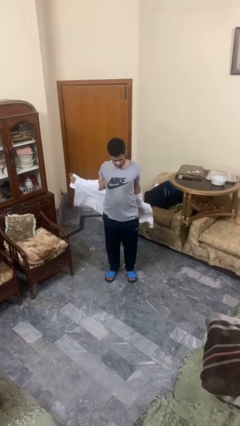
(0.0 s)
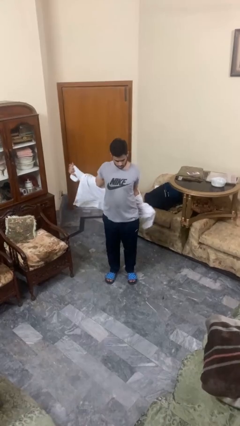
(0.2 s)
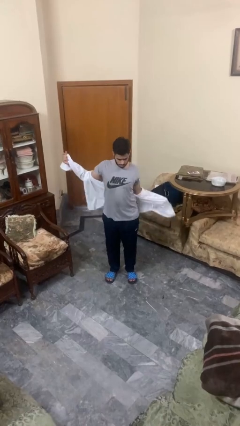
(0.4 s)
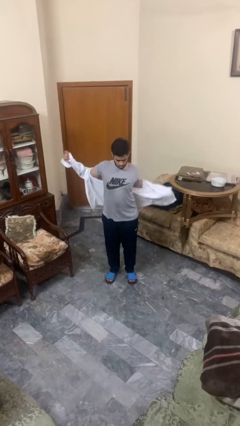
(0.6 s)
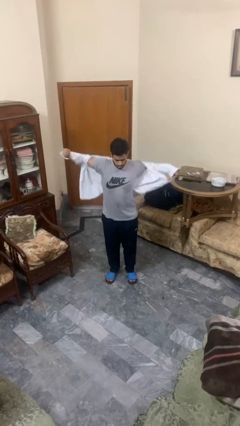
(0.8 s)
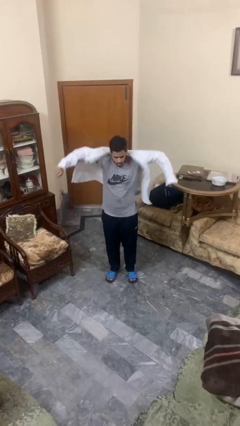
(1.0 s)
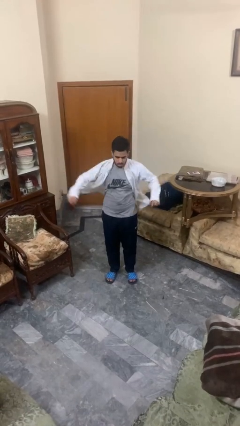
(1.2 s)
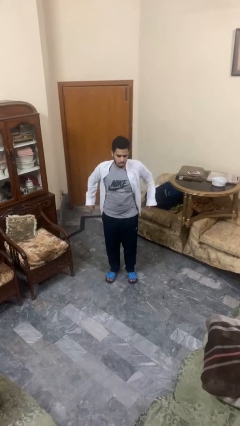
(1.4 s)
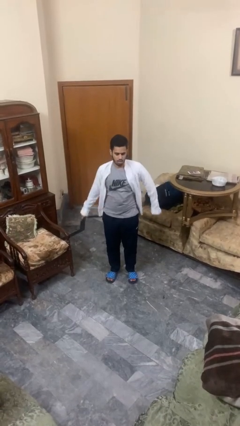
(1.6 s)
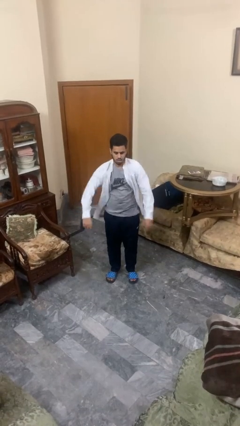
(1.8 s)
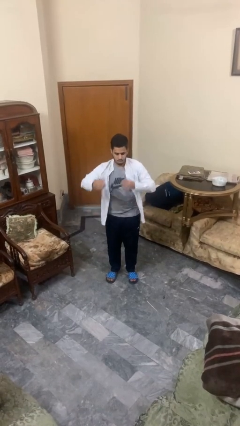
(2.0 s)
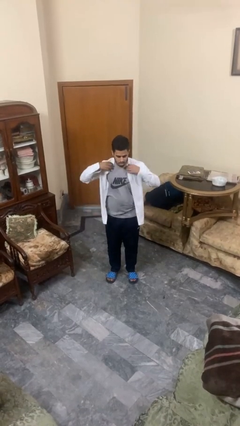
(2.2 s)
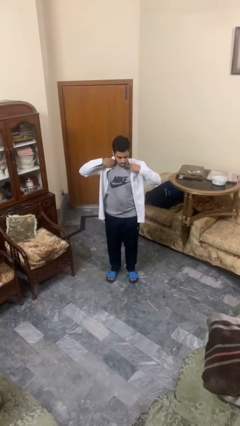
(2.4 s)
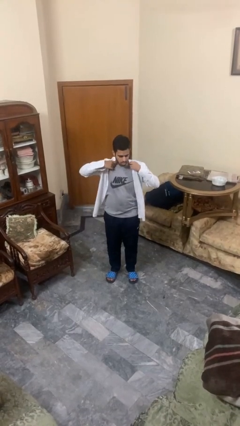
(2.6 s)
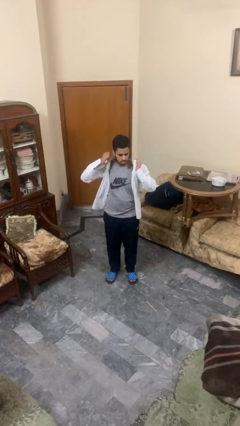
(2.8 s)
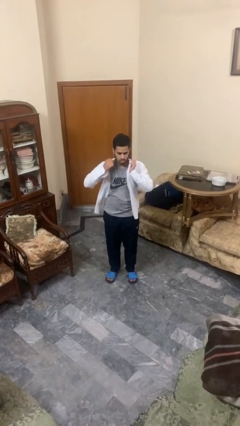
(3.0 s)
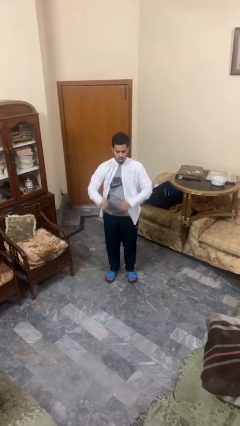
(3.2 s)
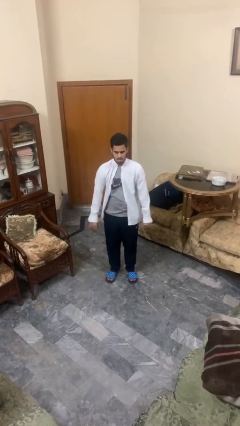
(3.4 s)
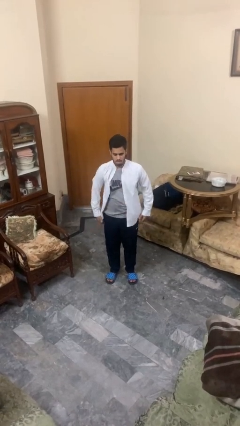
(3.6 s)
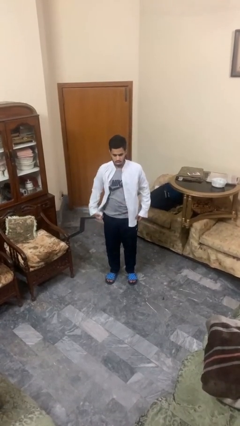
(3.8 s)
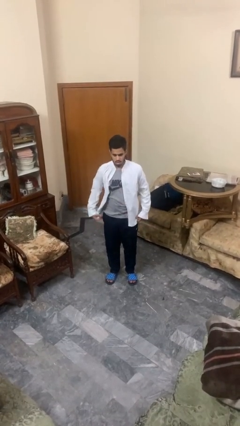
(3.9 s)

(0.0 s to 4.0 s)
person puts on shirt

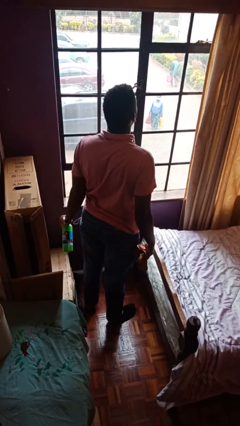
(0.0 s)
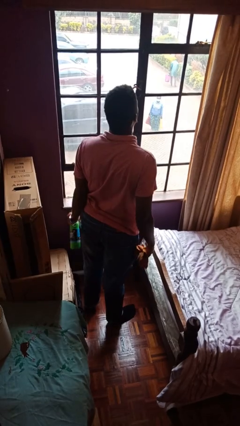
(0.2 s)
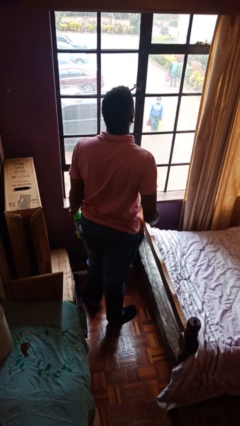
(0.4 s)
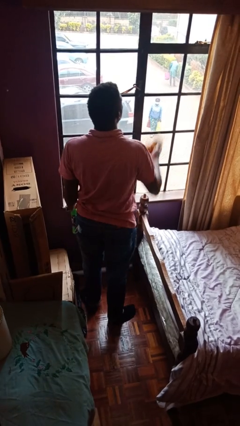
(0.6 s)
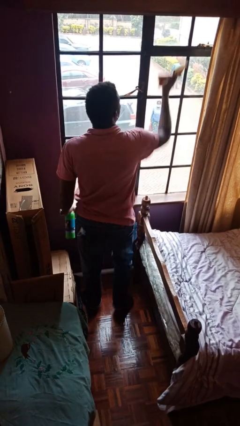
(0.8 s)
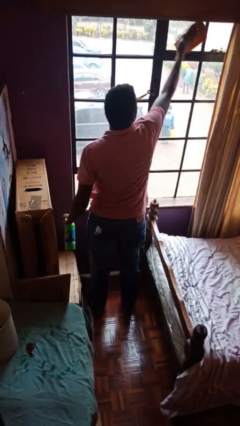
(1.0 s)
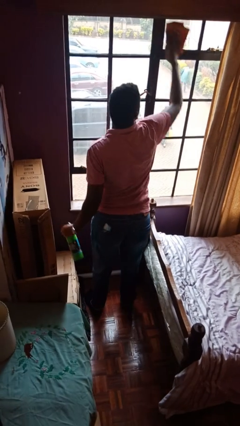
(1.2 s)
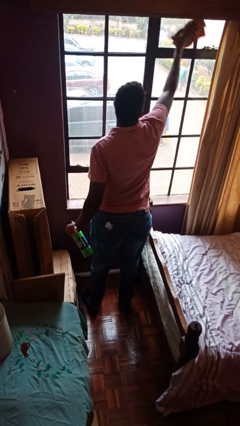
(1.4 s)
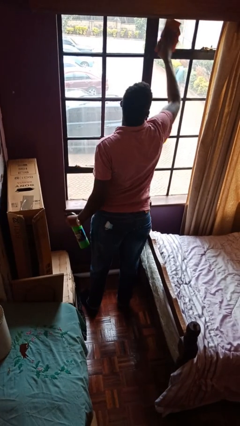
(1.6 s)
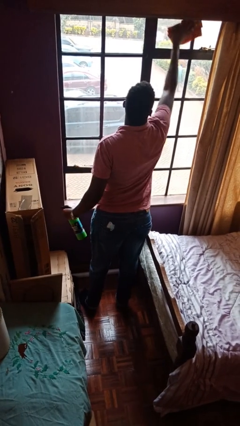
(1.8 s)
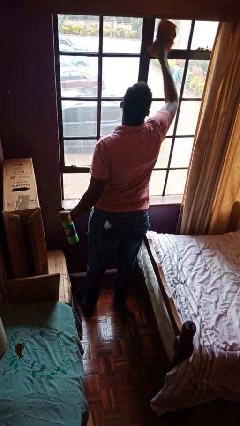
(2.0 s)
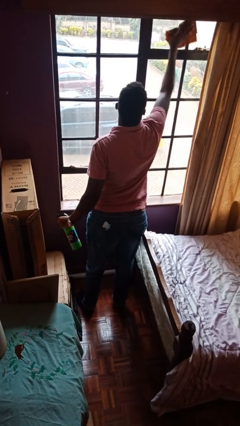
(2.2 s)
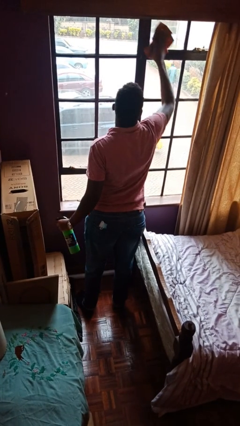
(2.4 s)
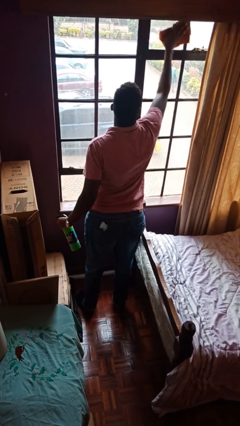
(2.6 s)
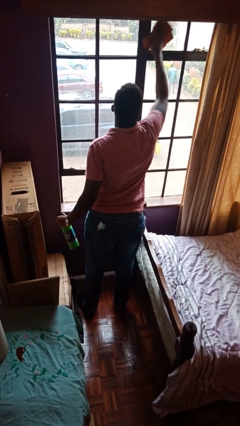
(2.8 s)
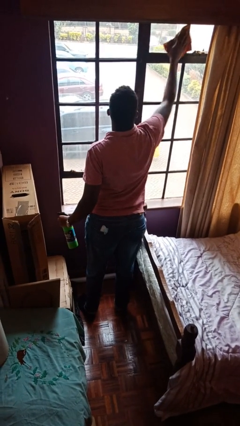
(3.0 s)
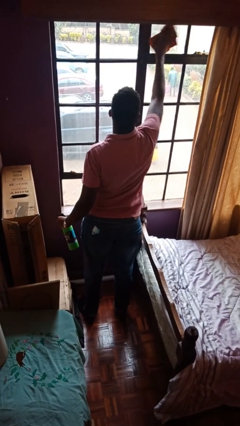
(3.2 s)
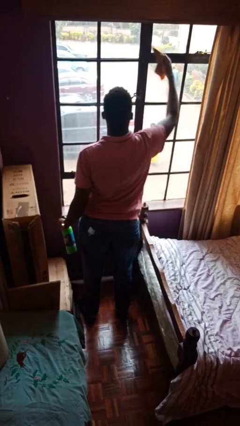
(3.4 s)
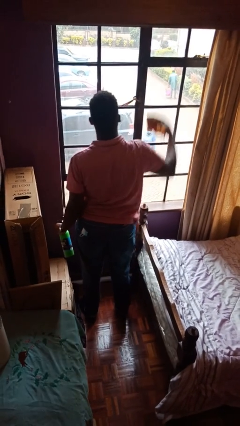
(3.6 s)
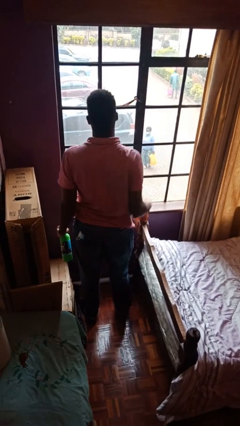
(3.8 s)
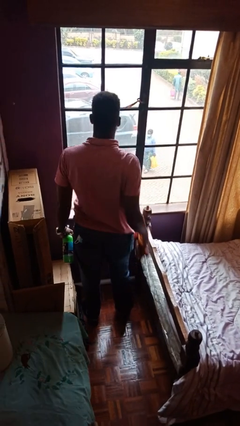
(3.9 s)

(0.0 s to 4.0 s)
person washes window

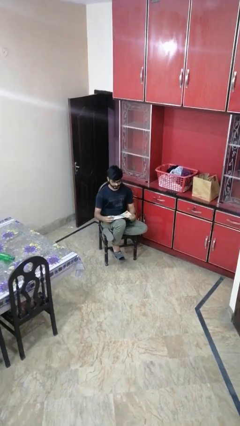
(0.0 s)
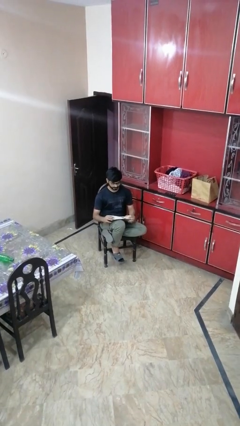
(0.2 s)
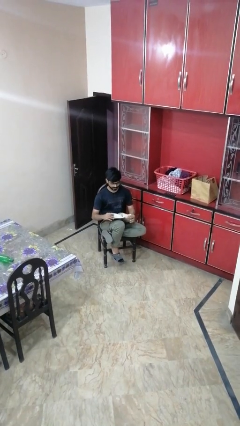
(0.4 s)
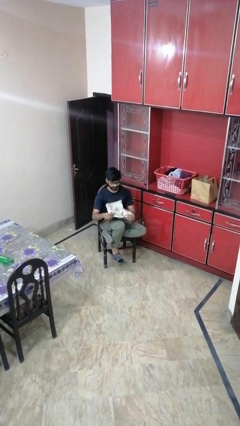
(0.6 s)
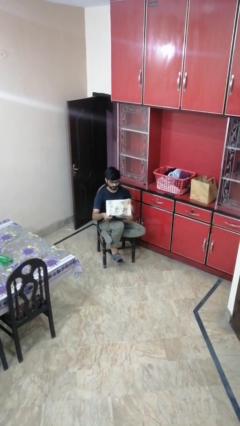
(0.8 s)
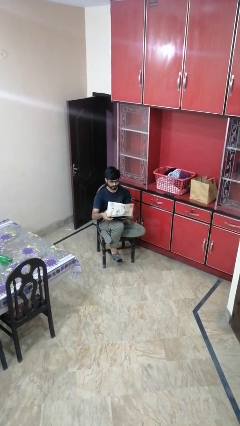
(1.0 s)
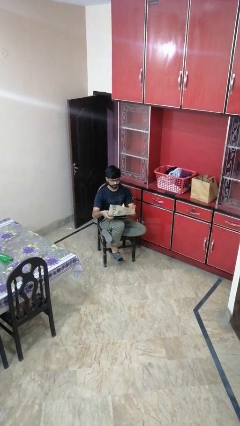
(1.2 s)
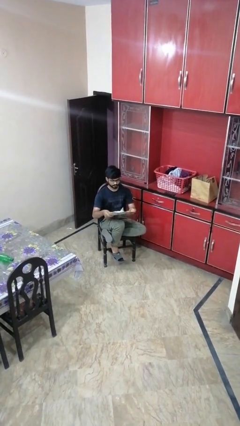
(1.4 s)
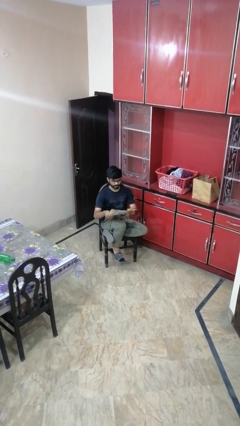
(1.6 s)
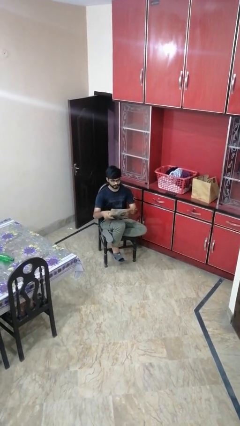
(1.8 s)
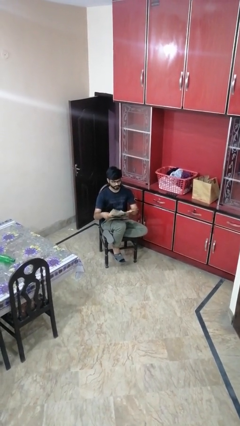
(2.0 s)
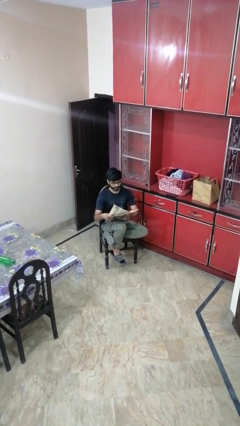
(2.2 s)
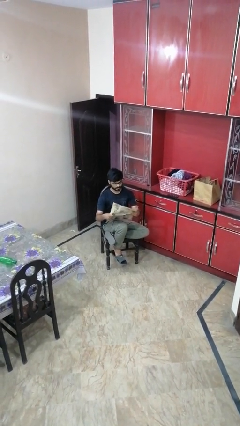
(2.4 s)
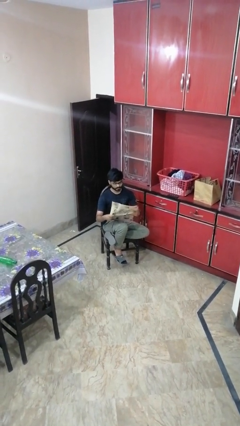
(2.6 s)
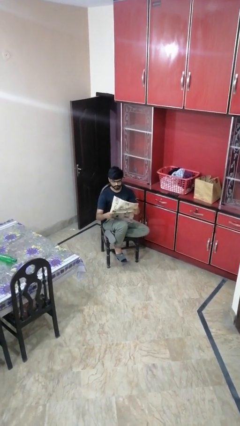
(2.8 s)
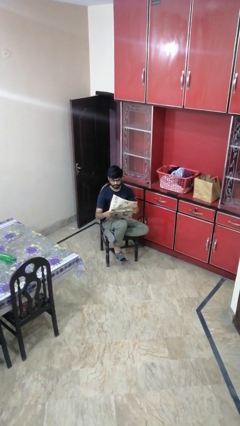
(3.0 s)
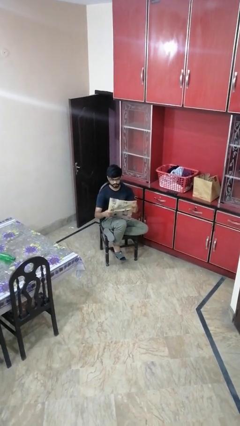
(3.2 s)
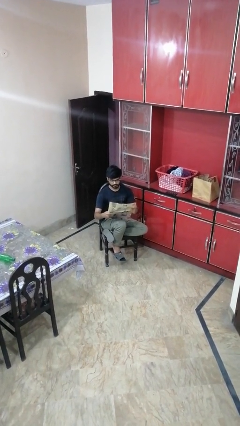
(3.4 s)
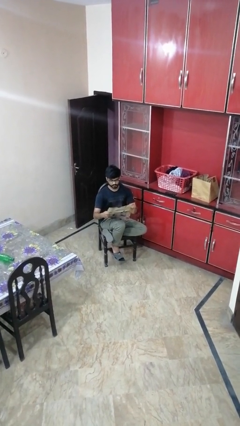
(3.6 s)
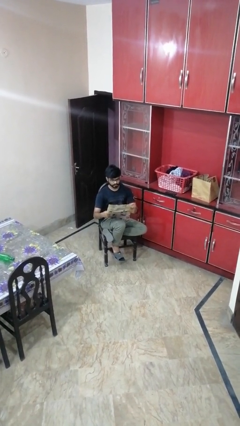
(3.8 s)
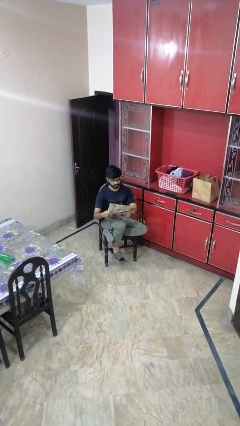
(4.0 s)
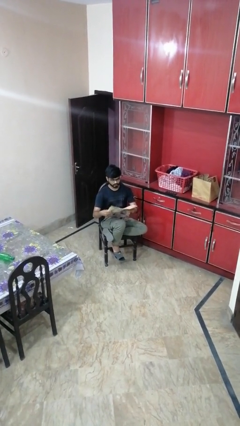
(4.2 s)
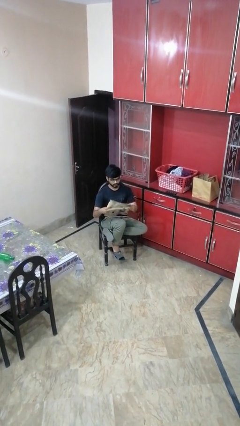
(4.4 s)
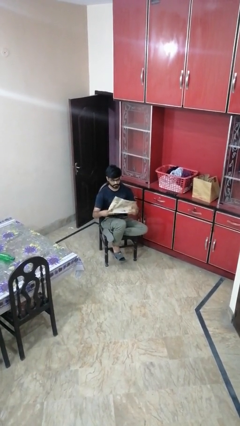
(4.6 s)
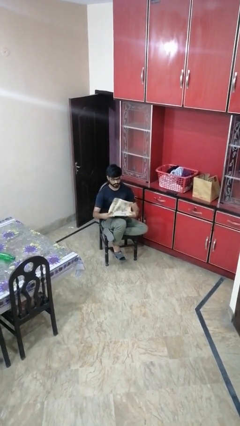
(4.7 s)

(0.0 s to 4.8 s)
person reads newspaper

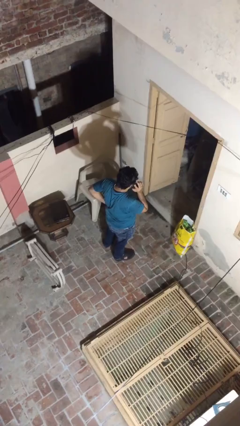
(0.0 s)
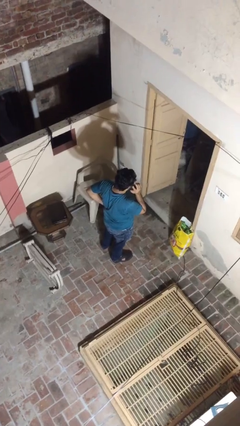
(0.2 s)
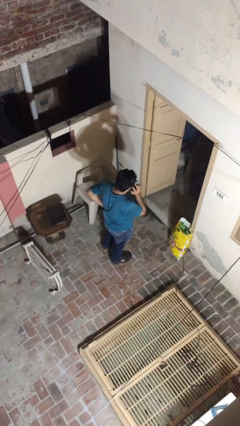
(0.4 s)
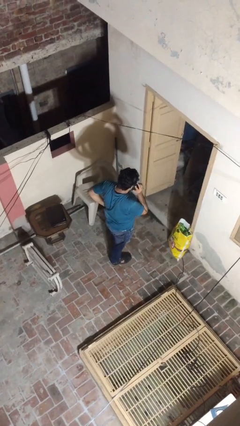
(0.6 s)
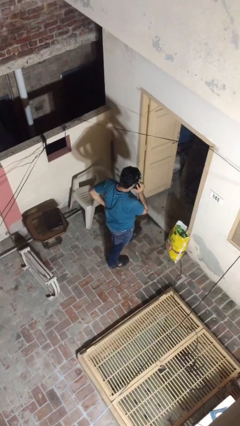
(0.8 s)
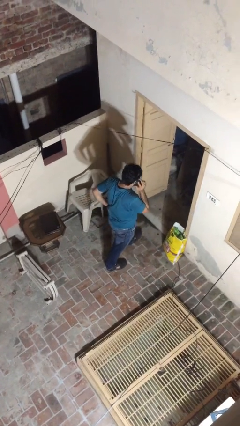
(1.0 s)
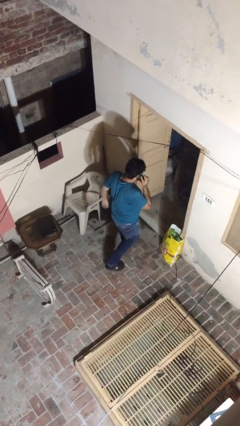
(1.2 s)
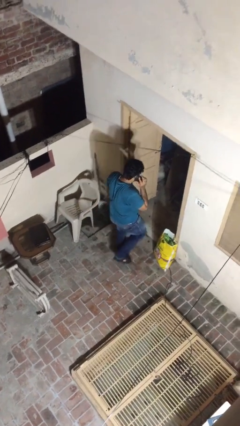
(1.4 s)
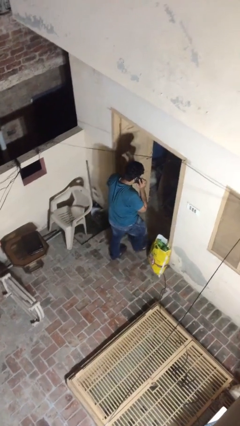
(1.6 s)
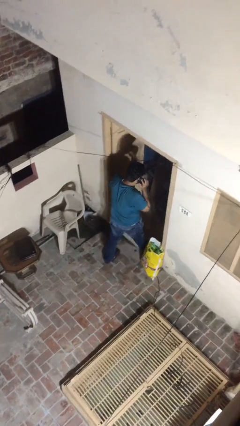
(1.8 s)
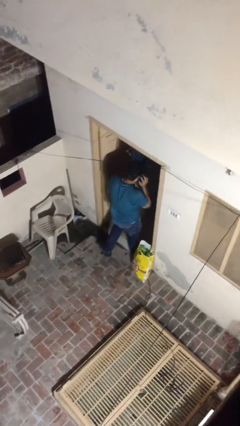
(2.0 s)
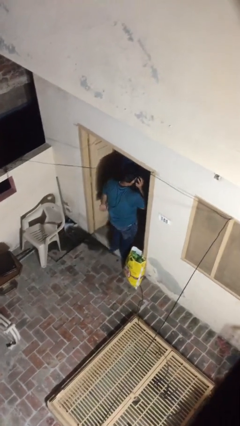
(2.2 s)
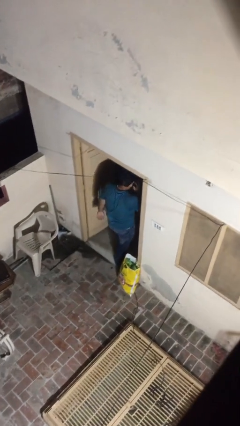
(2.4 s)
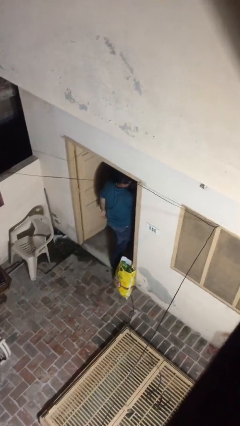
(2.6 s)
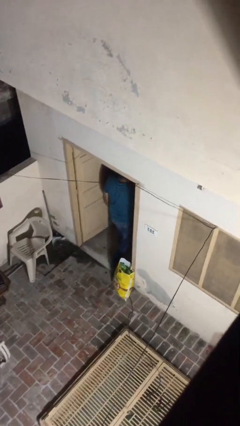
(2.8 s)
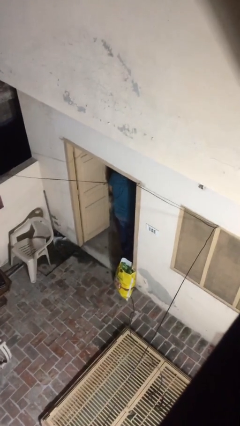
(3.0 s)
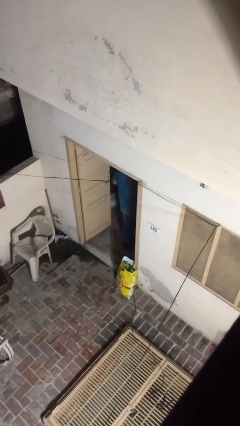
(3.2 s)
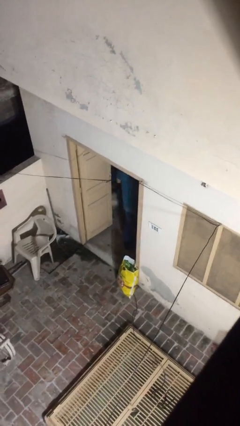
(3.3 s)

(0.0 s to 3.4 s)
person exits scene through structure

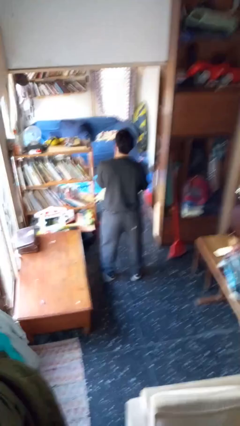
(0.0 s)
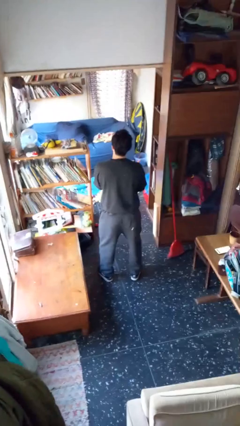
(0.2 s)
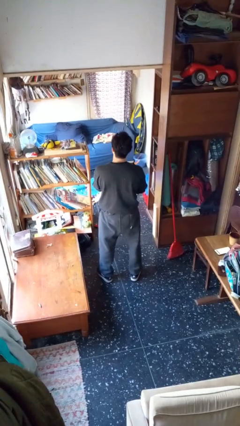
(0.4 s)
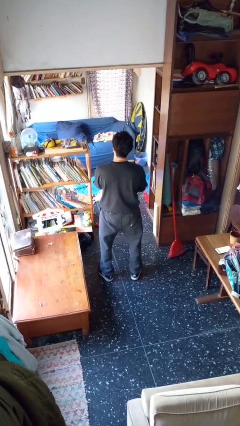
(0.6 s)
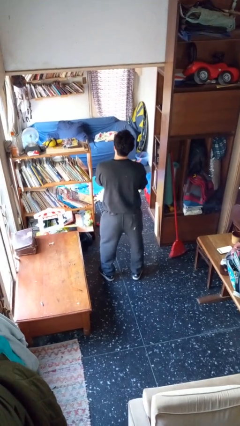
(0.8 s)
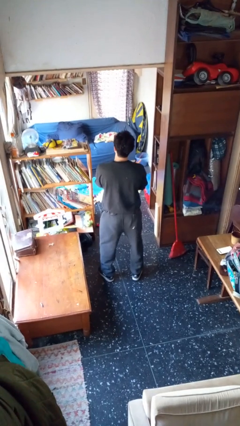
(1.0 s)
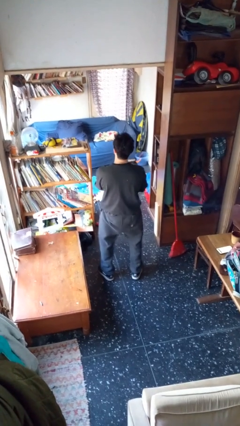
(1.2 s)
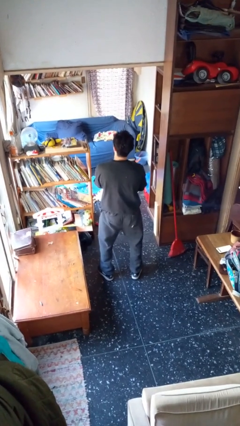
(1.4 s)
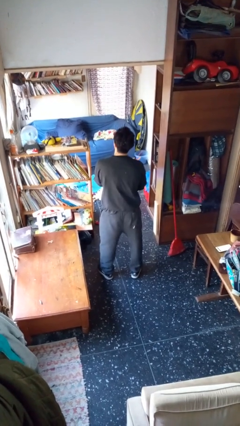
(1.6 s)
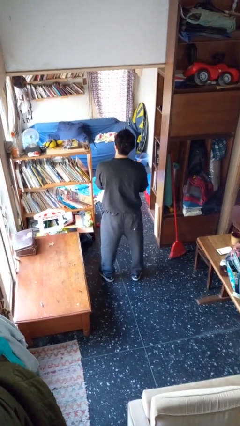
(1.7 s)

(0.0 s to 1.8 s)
person wiggles hips
